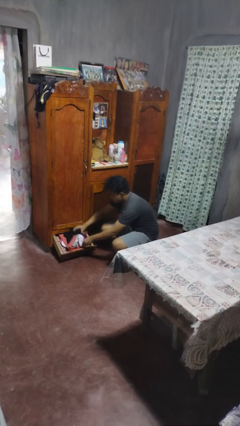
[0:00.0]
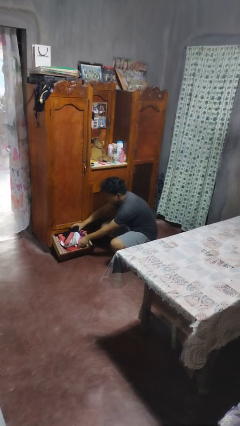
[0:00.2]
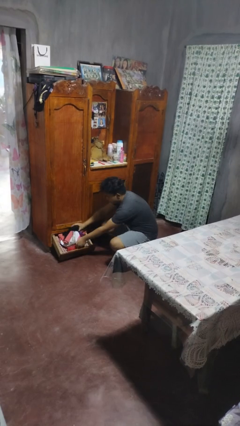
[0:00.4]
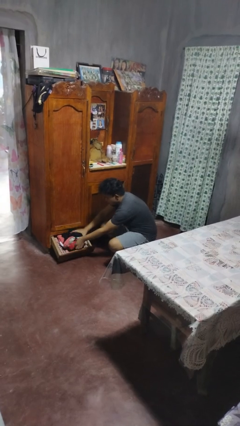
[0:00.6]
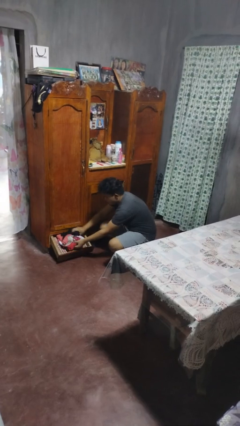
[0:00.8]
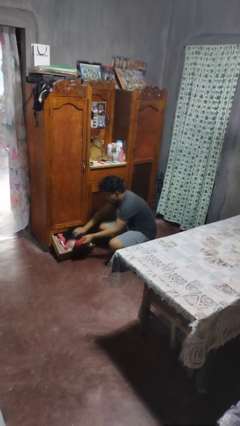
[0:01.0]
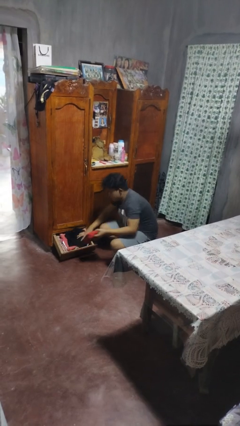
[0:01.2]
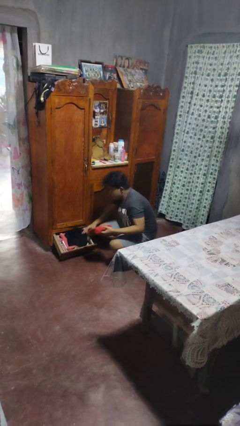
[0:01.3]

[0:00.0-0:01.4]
person takes clothes from dresser

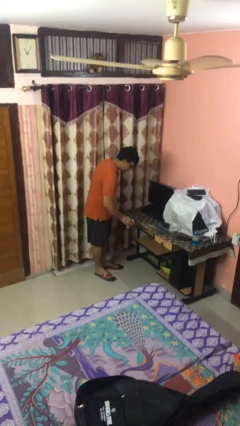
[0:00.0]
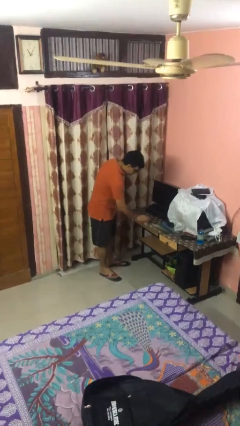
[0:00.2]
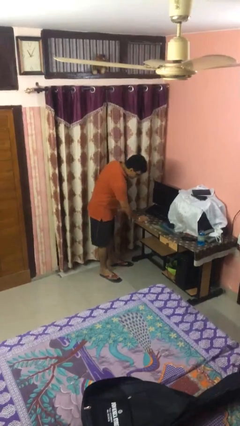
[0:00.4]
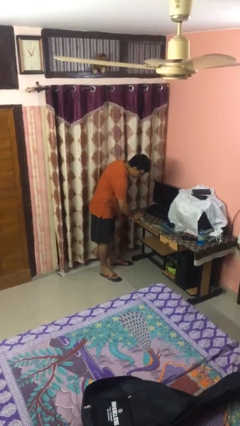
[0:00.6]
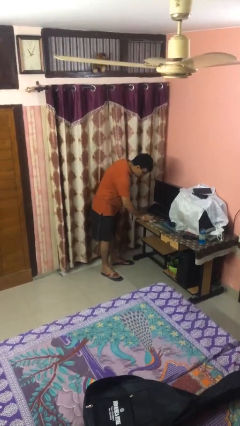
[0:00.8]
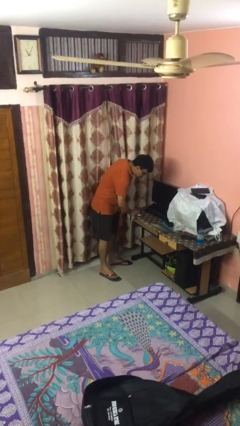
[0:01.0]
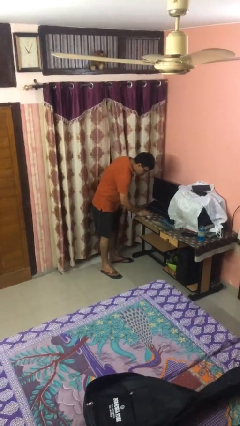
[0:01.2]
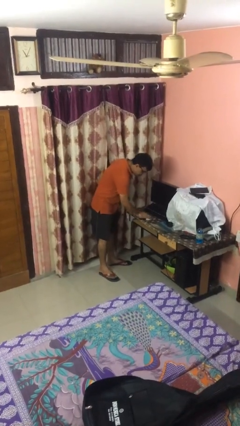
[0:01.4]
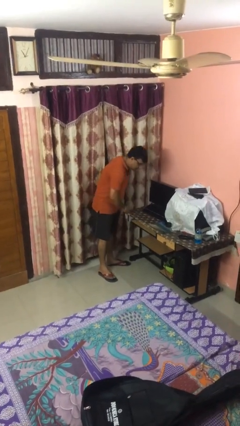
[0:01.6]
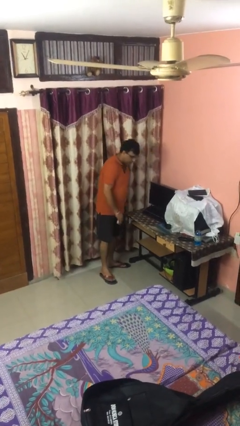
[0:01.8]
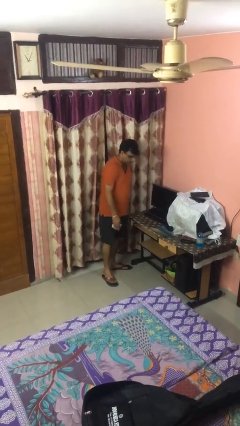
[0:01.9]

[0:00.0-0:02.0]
person cleans table with rag

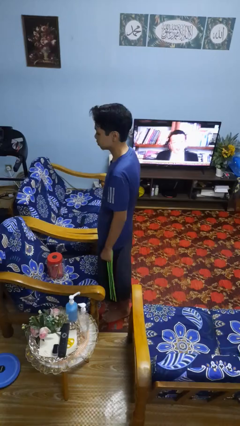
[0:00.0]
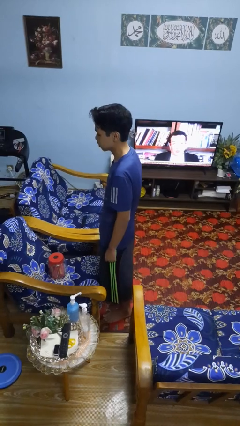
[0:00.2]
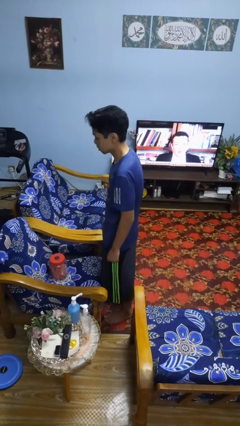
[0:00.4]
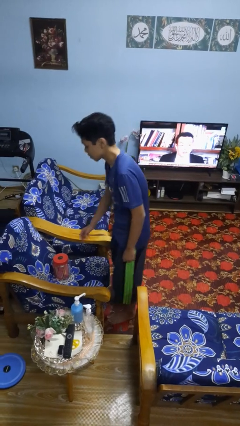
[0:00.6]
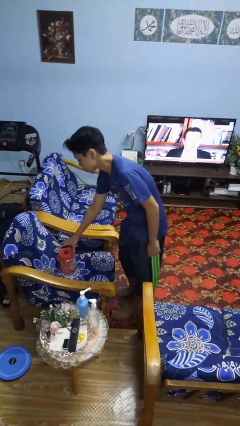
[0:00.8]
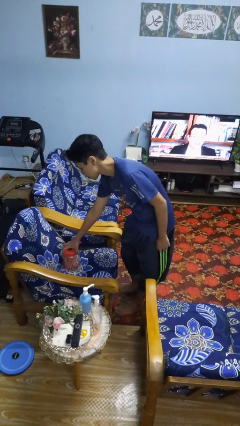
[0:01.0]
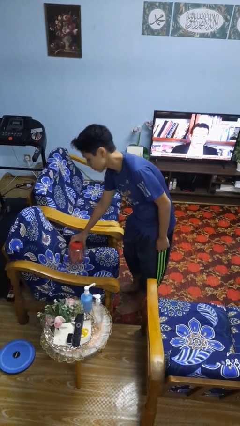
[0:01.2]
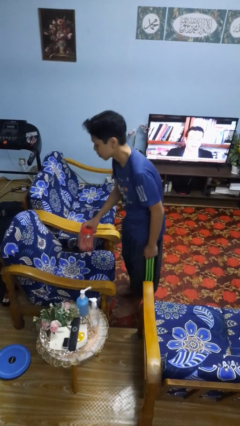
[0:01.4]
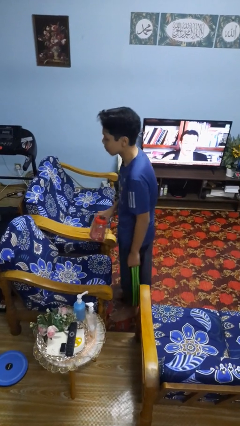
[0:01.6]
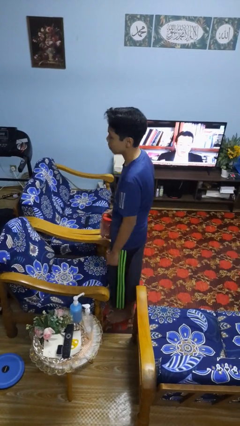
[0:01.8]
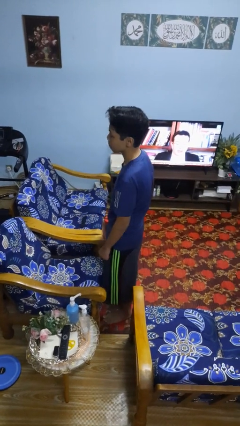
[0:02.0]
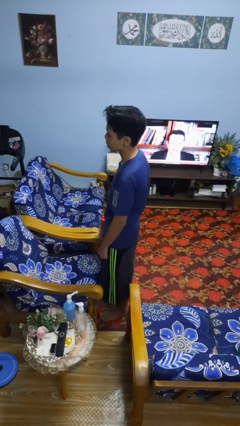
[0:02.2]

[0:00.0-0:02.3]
person picks up object from couch

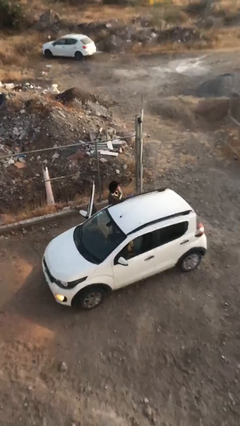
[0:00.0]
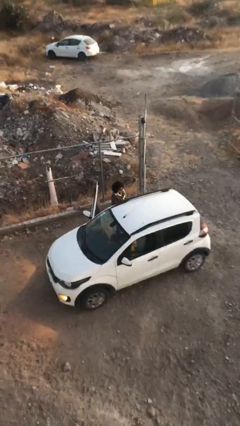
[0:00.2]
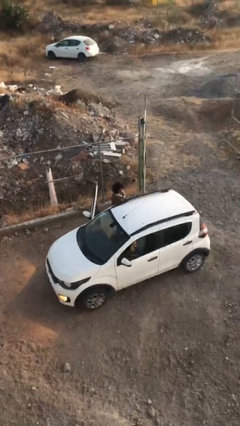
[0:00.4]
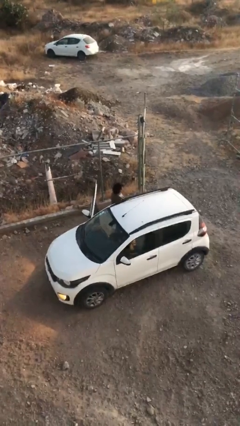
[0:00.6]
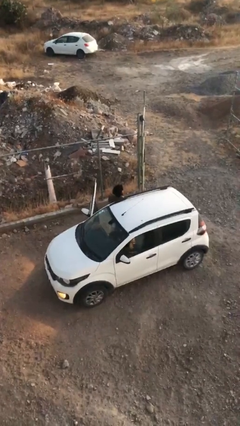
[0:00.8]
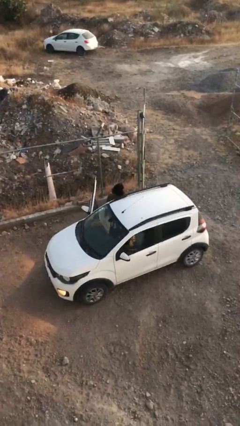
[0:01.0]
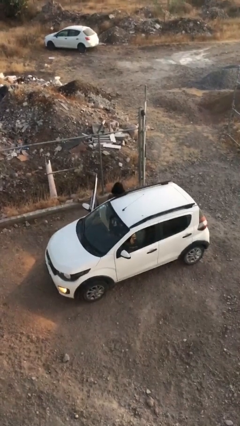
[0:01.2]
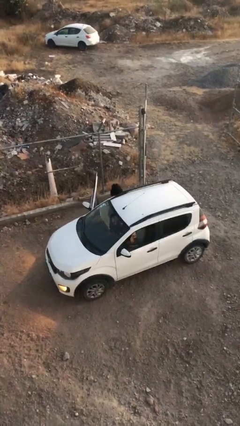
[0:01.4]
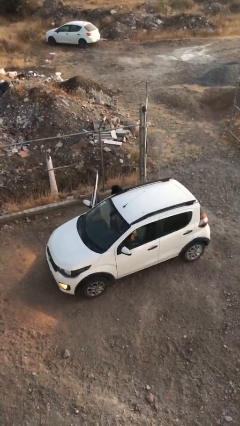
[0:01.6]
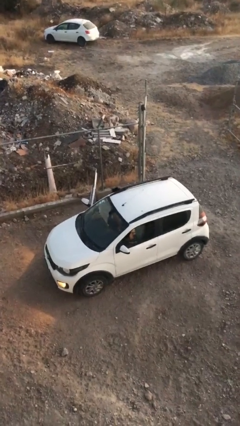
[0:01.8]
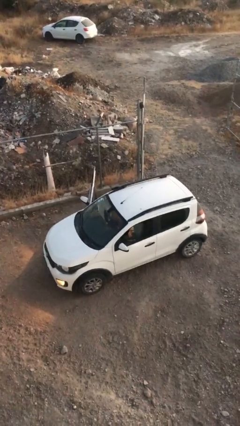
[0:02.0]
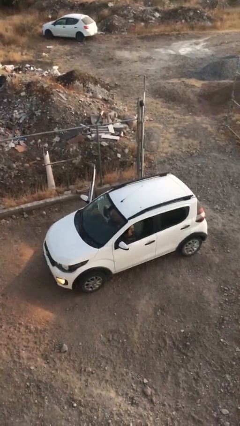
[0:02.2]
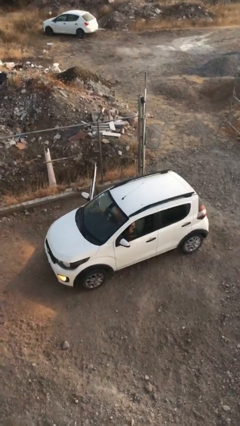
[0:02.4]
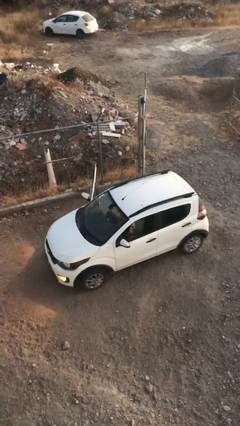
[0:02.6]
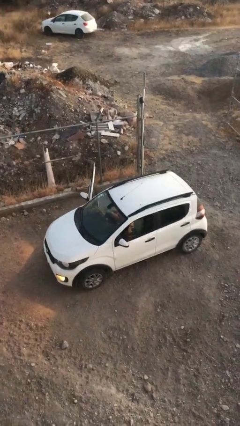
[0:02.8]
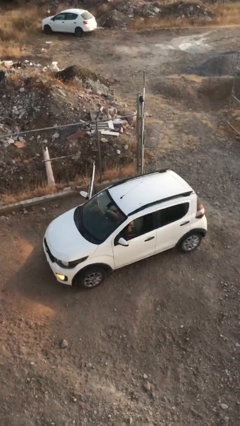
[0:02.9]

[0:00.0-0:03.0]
person enters car

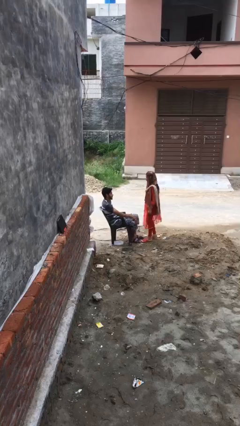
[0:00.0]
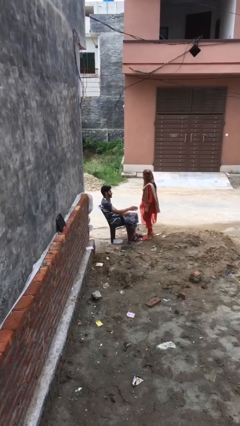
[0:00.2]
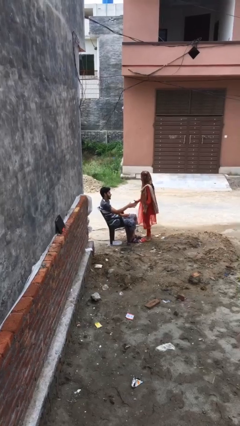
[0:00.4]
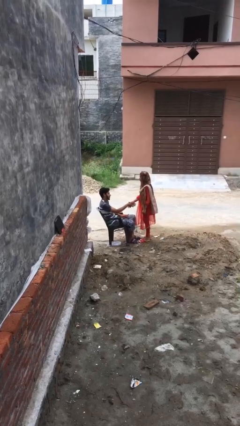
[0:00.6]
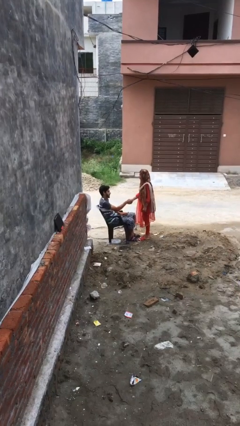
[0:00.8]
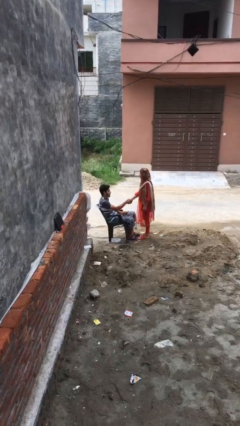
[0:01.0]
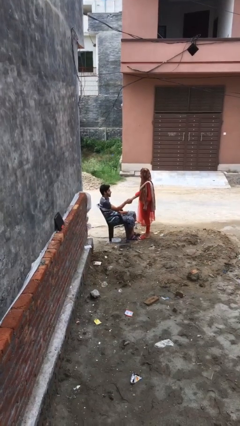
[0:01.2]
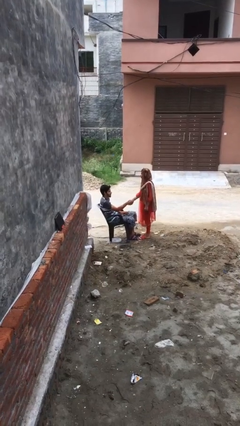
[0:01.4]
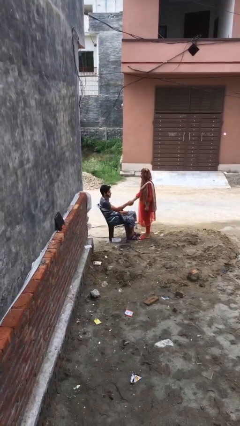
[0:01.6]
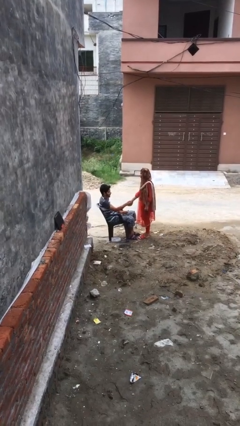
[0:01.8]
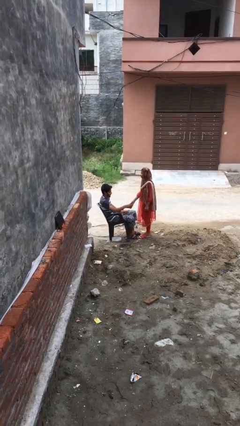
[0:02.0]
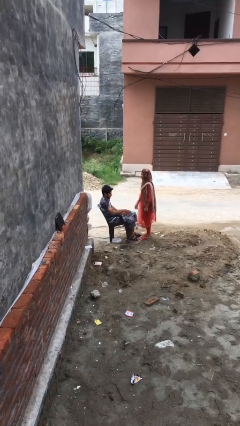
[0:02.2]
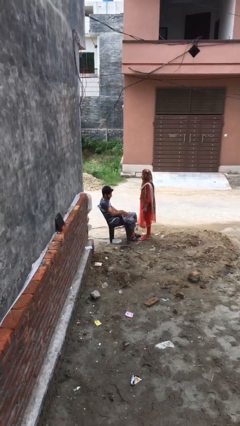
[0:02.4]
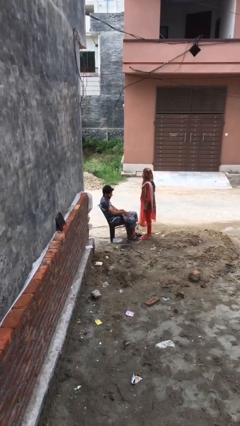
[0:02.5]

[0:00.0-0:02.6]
person shakes hand

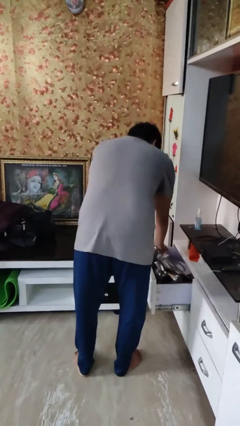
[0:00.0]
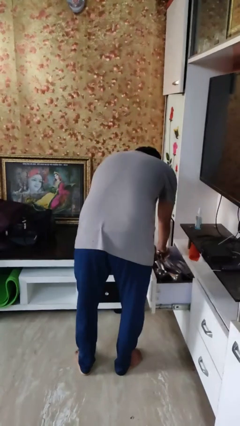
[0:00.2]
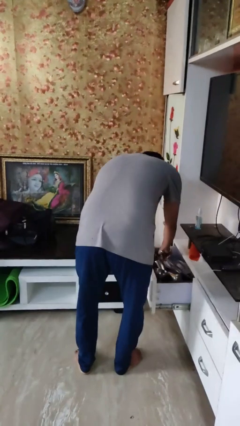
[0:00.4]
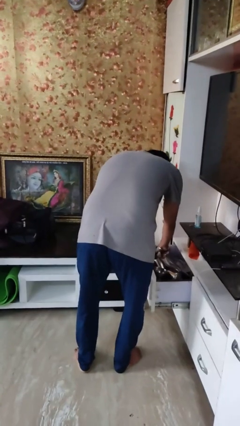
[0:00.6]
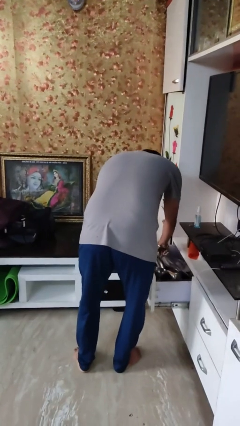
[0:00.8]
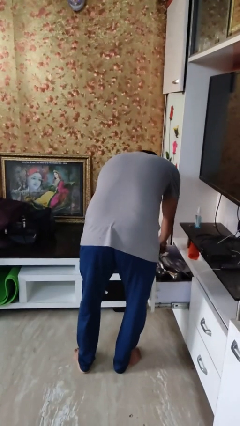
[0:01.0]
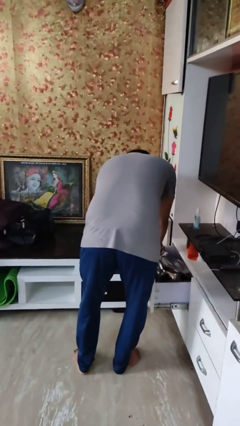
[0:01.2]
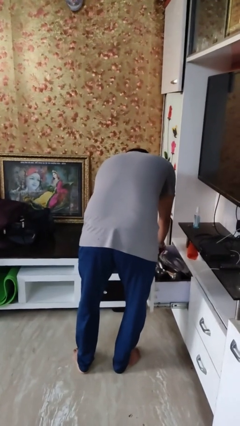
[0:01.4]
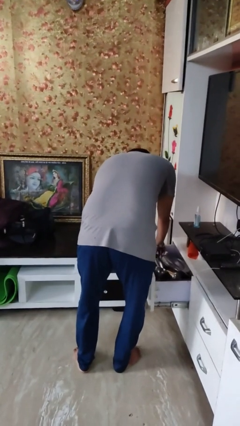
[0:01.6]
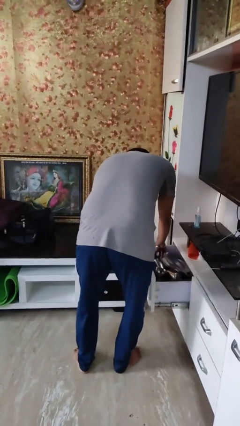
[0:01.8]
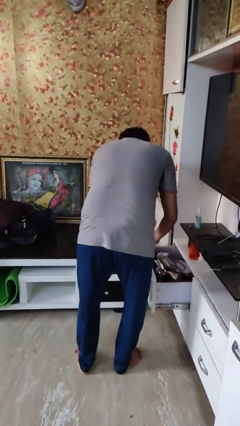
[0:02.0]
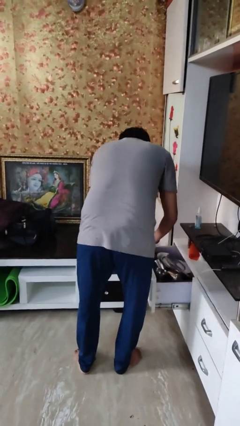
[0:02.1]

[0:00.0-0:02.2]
person searches in kitchen drawer

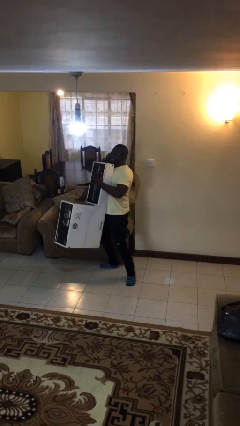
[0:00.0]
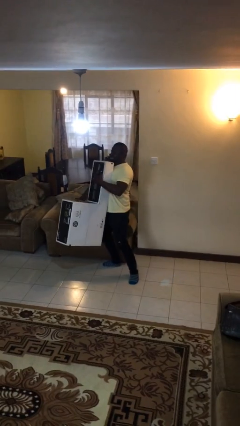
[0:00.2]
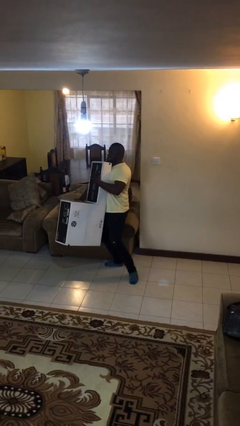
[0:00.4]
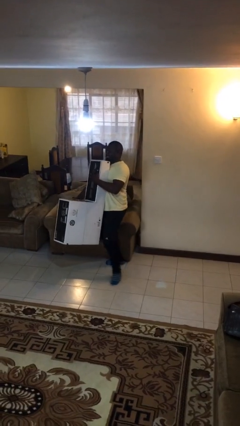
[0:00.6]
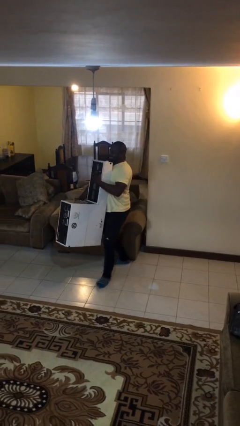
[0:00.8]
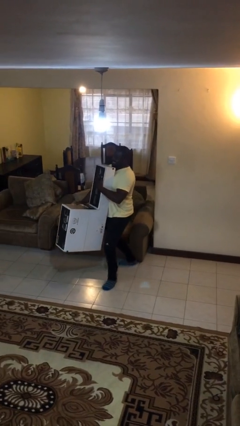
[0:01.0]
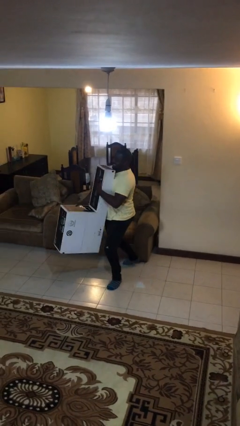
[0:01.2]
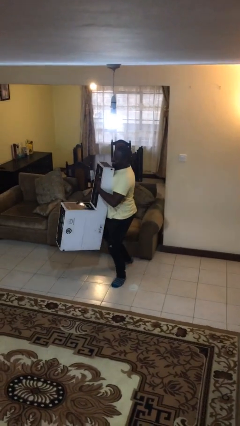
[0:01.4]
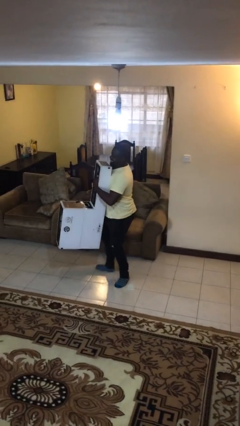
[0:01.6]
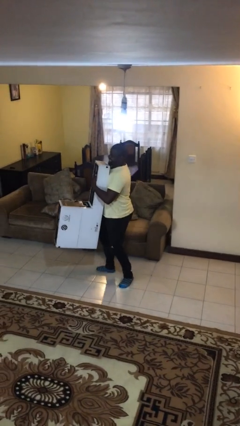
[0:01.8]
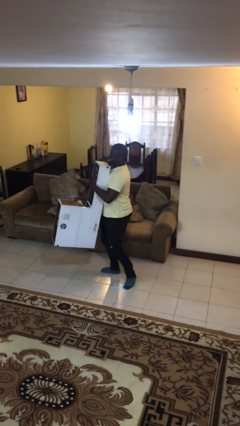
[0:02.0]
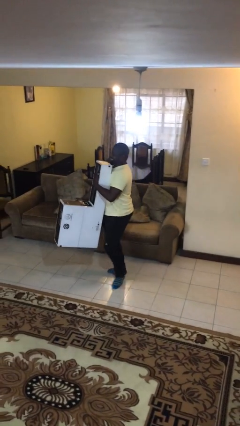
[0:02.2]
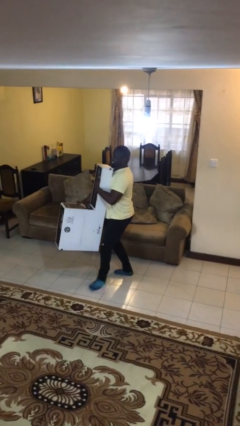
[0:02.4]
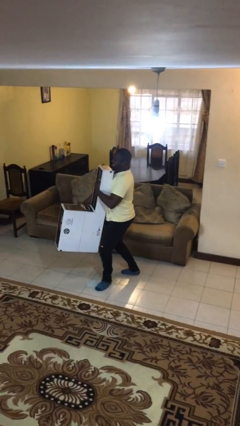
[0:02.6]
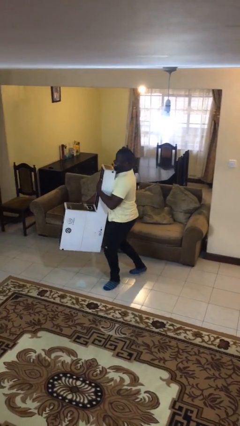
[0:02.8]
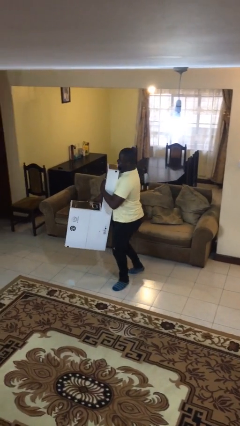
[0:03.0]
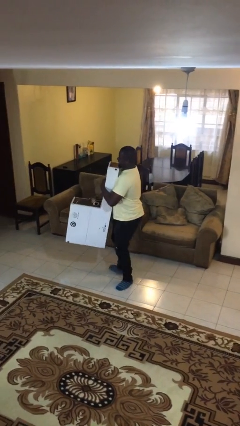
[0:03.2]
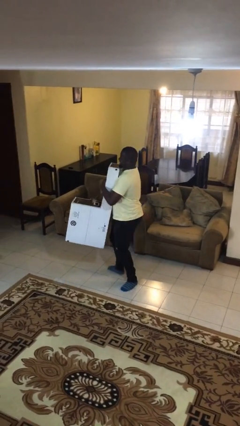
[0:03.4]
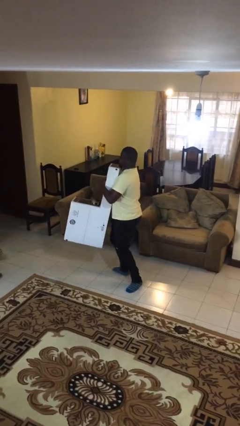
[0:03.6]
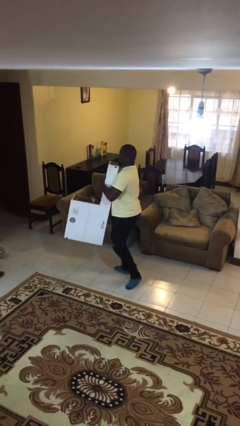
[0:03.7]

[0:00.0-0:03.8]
person carries heavy object
